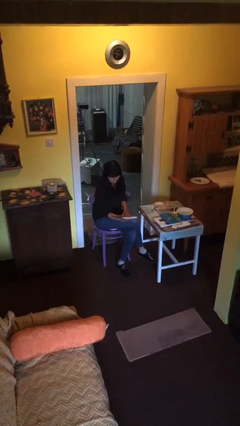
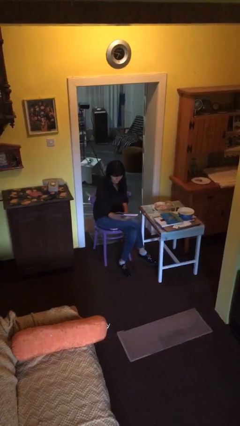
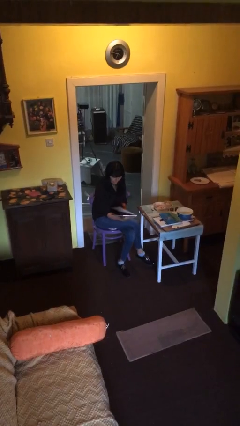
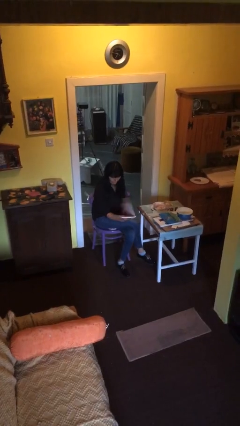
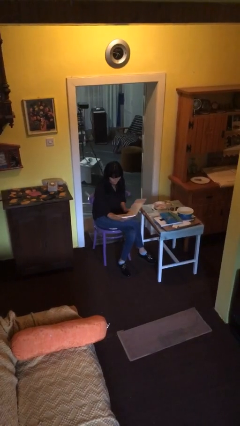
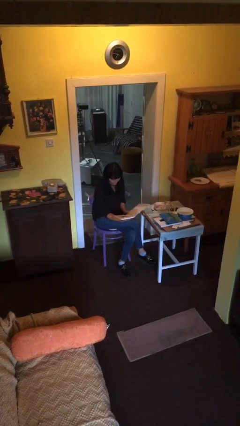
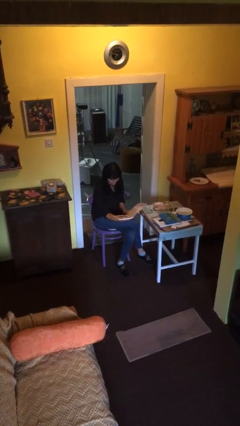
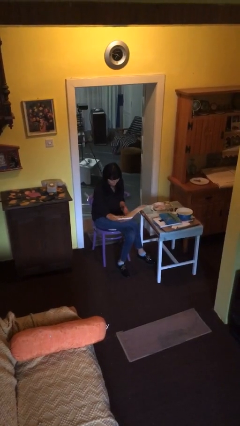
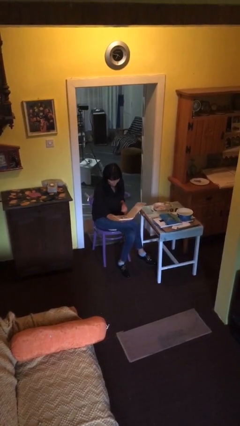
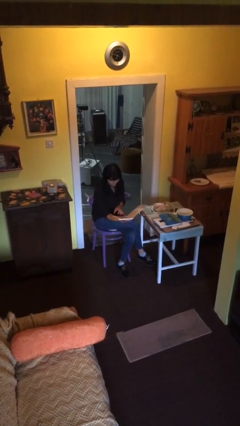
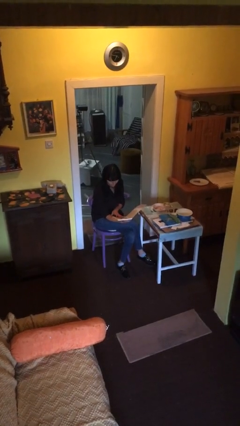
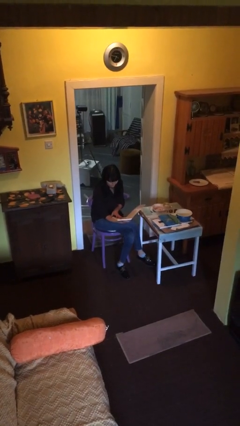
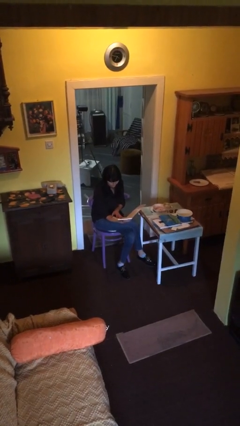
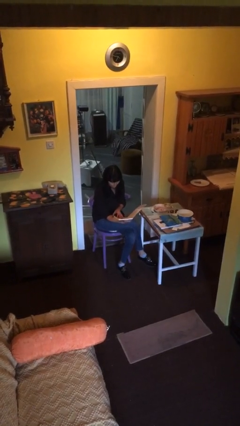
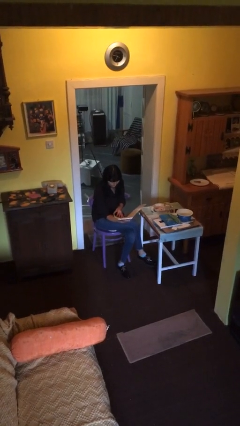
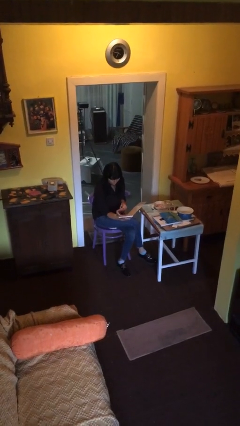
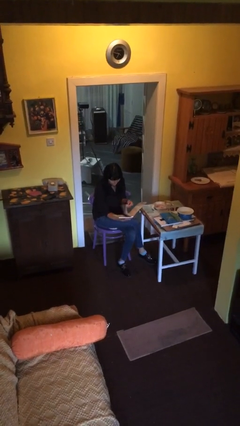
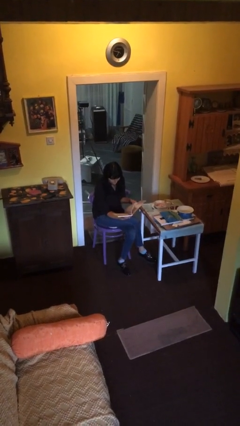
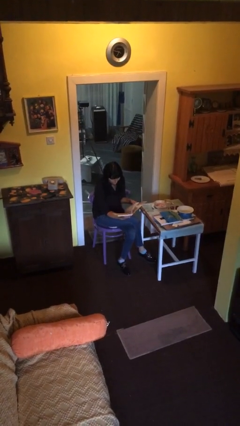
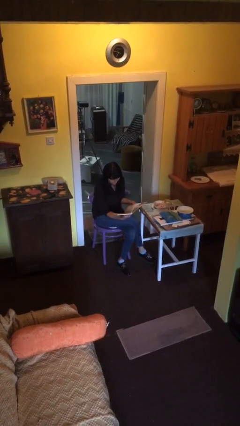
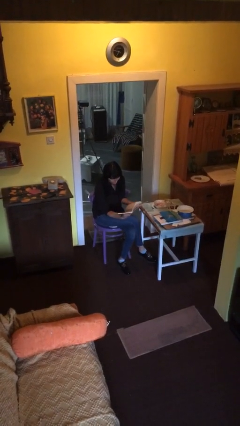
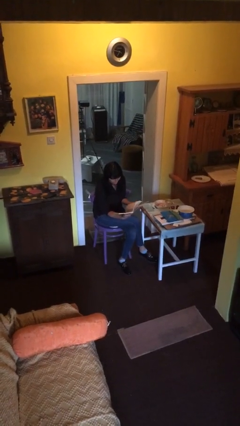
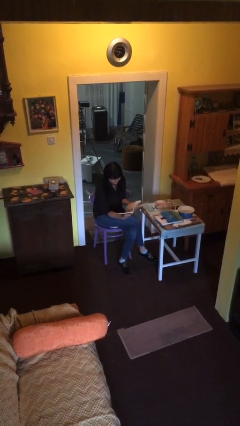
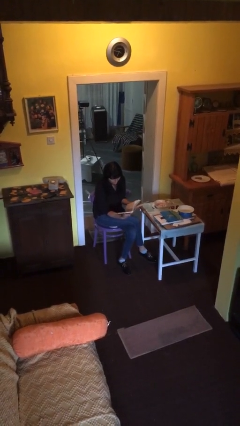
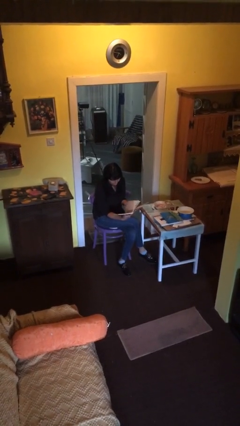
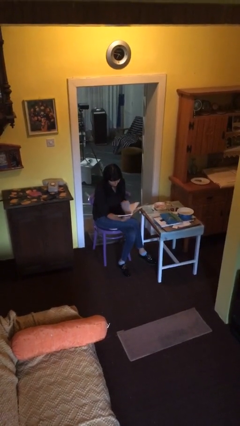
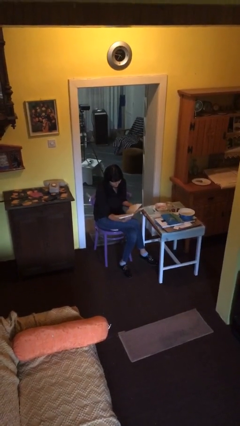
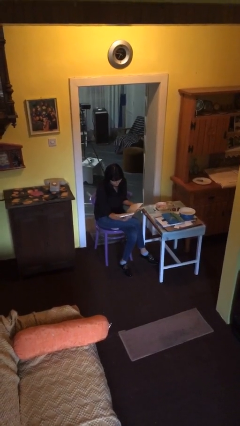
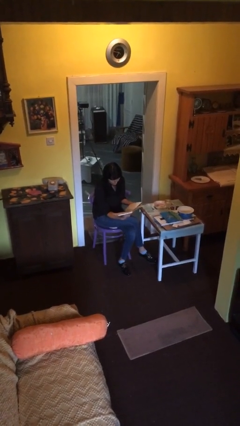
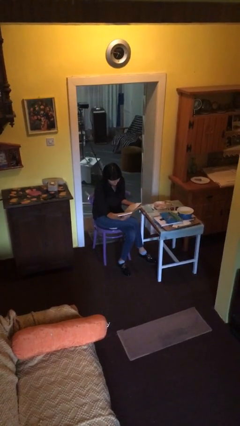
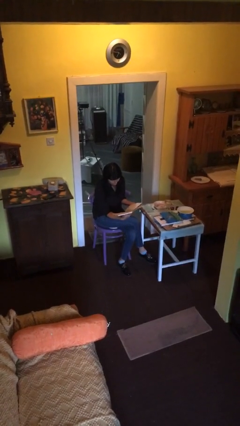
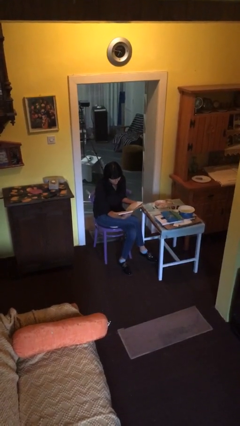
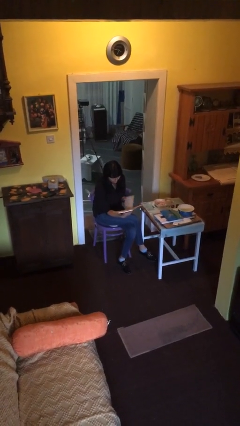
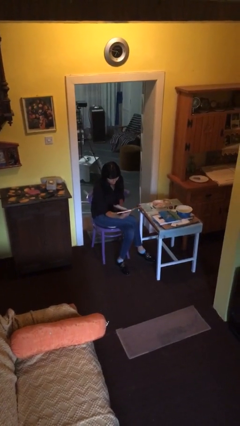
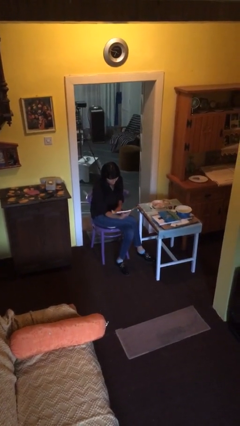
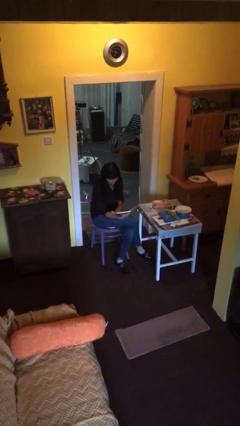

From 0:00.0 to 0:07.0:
person reads document

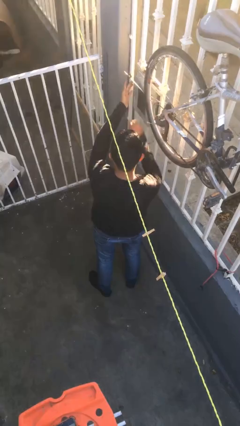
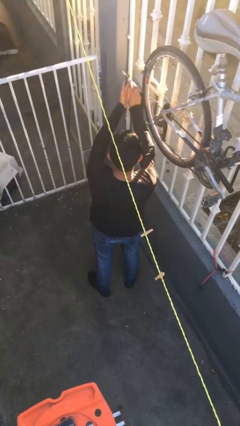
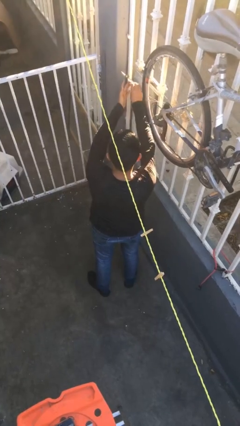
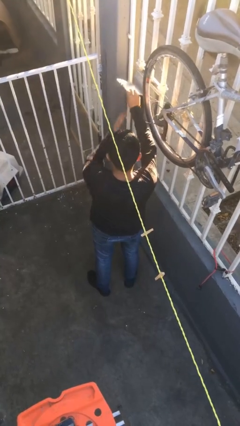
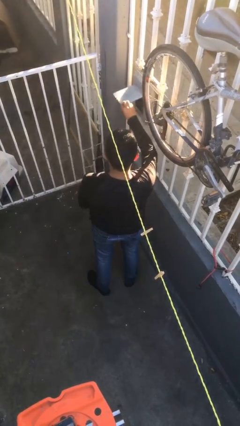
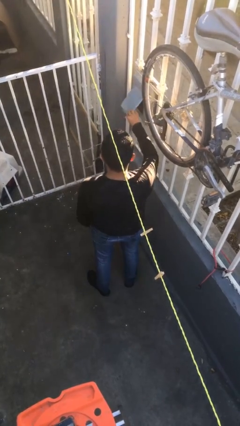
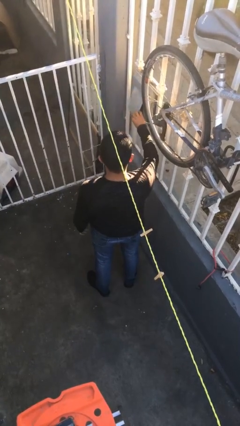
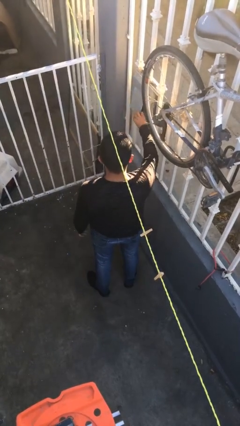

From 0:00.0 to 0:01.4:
person closes mailbox

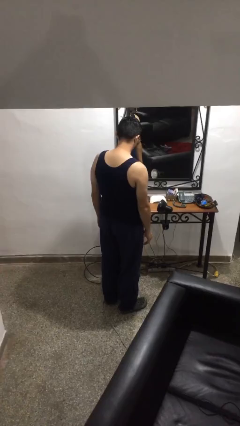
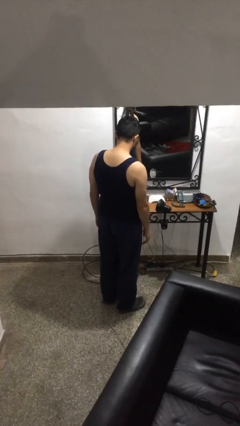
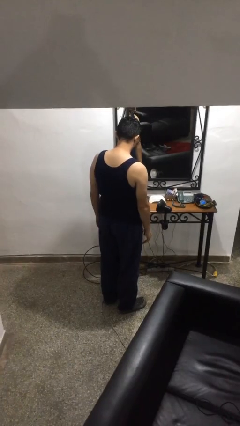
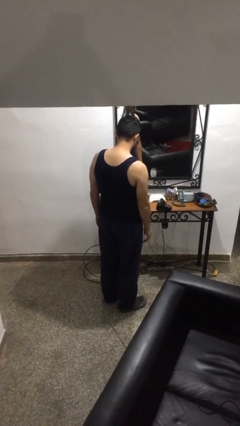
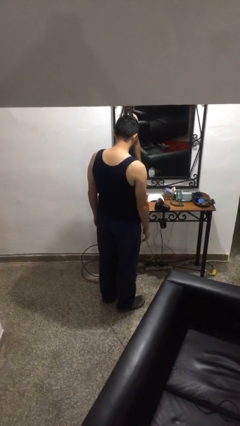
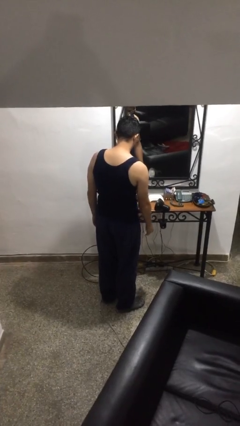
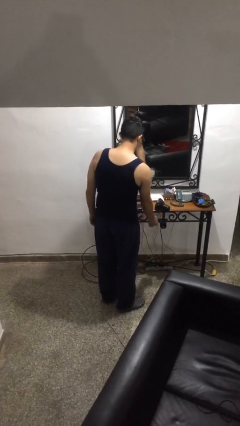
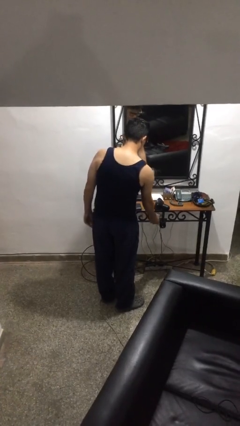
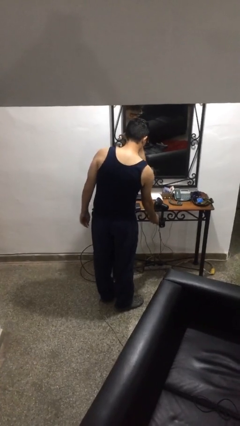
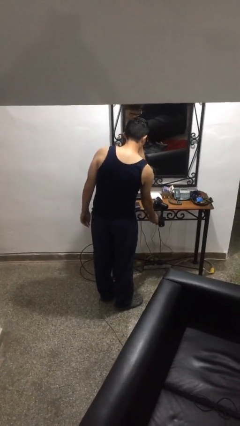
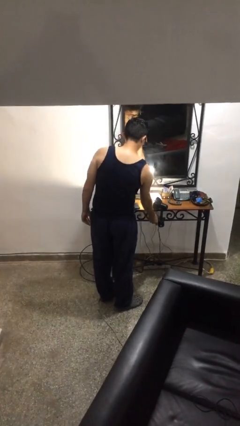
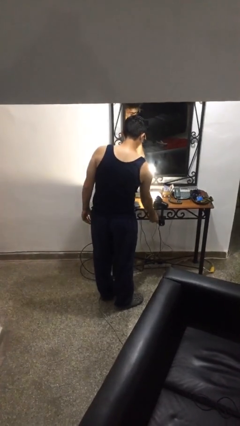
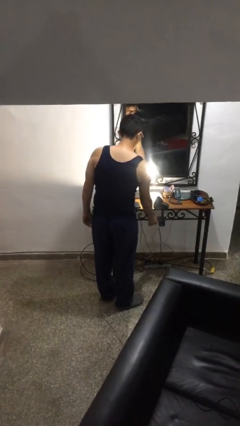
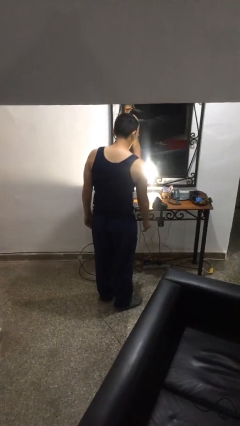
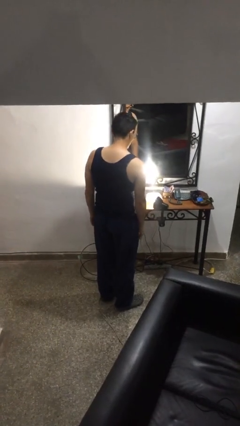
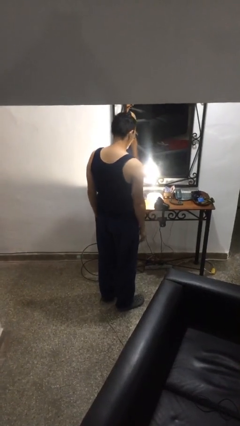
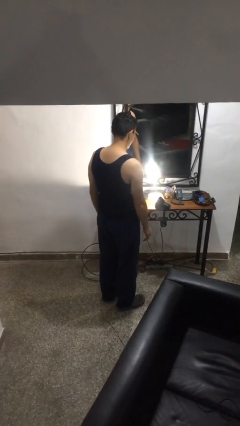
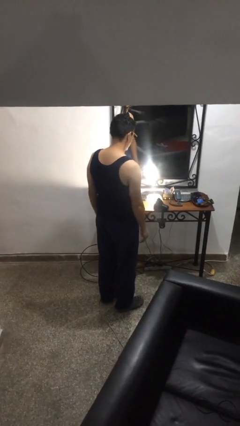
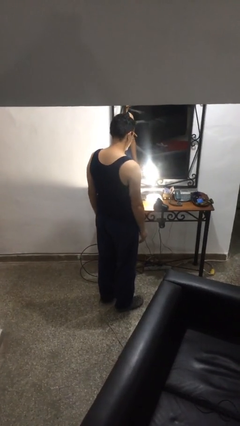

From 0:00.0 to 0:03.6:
person turns on lamp

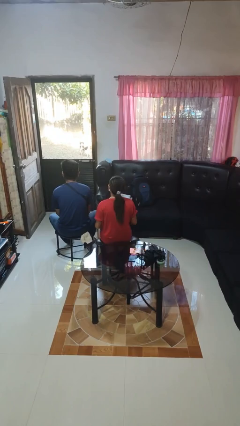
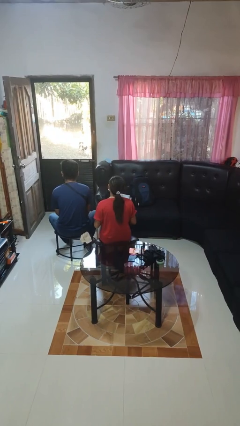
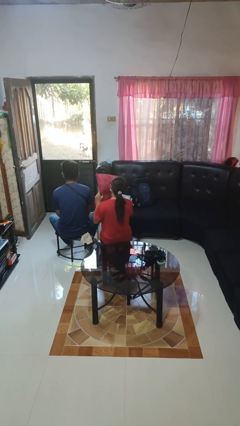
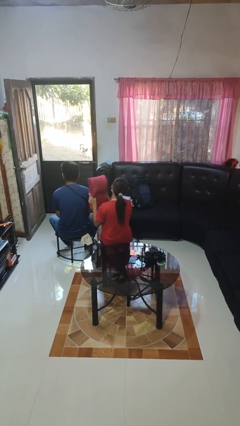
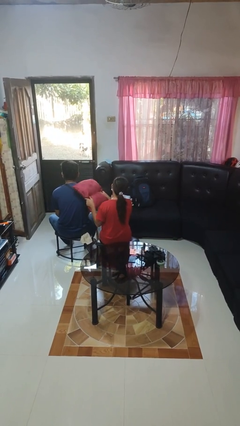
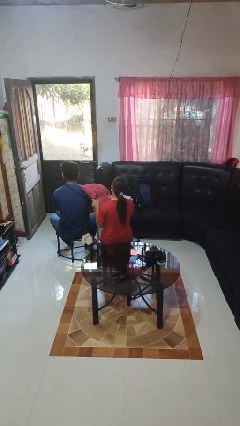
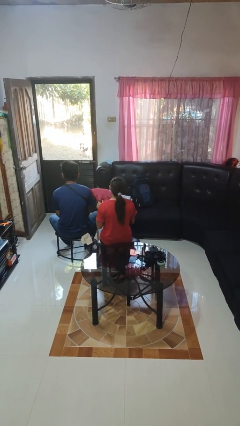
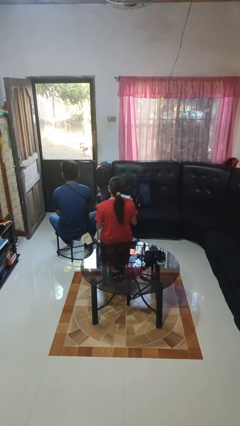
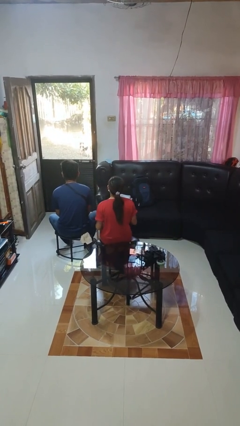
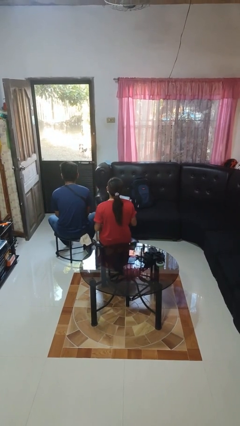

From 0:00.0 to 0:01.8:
person hits person with pillow

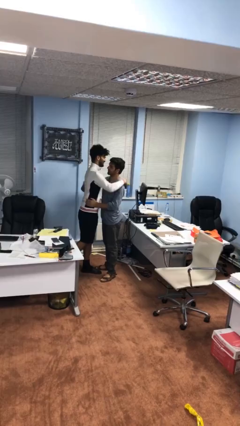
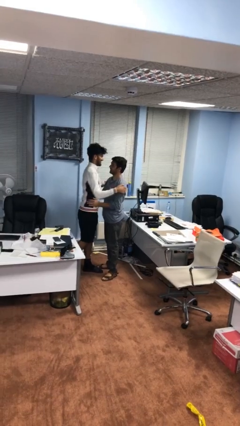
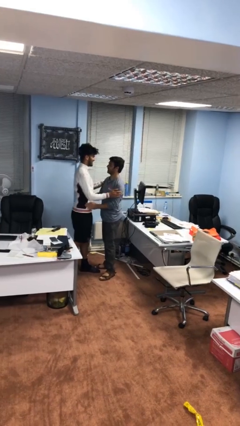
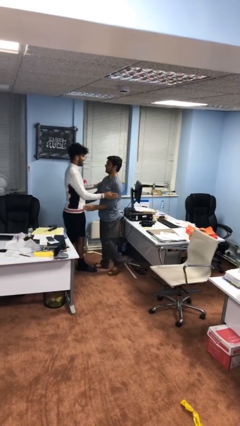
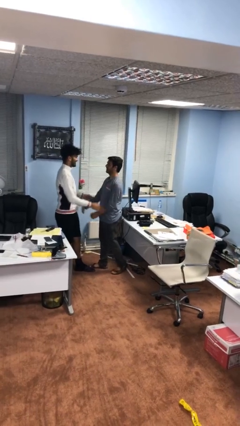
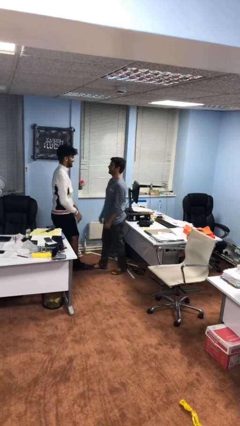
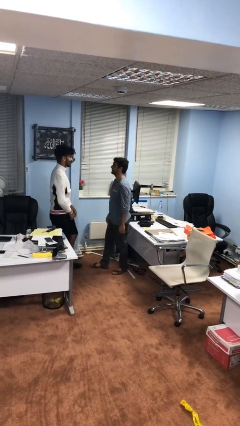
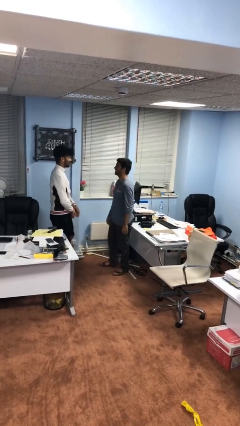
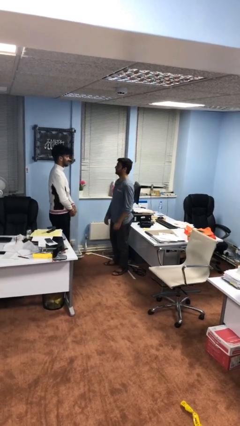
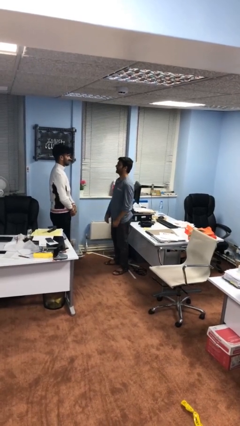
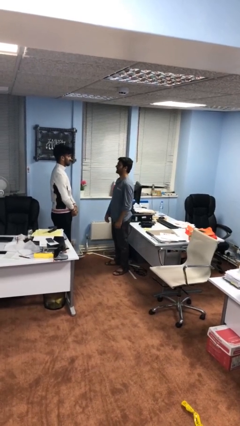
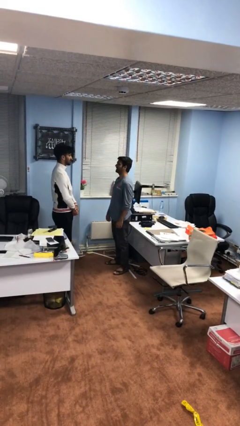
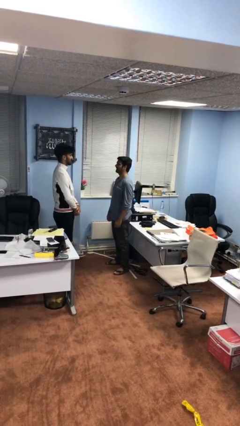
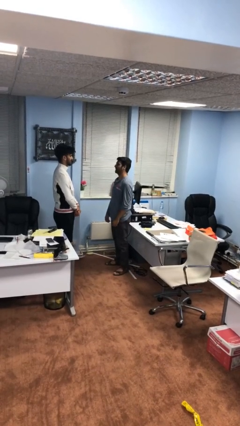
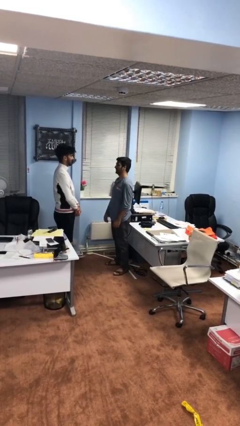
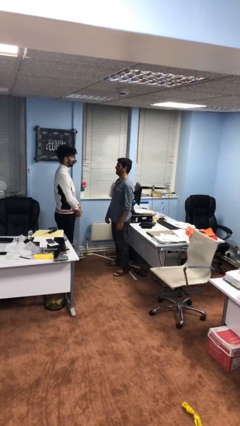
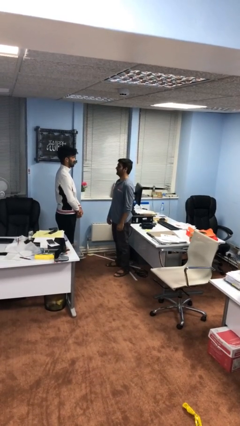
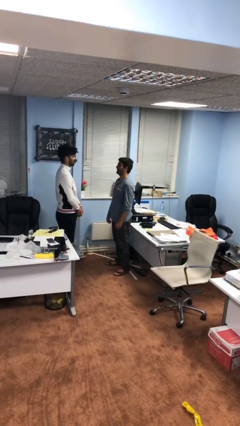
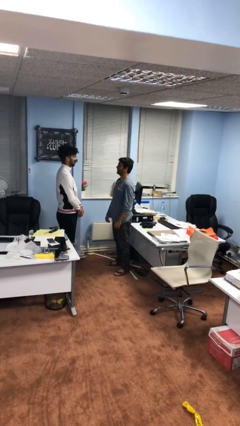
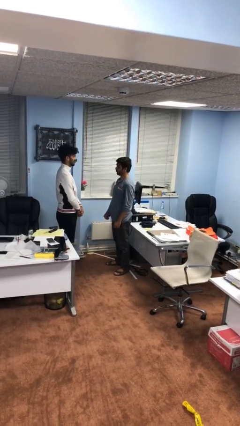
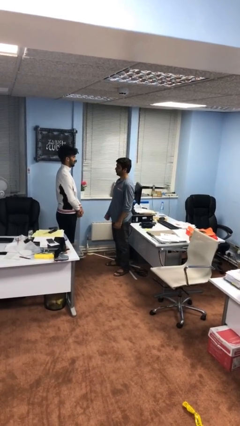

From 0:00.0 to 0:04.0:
person talks to person
